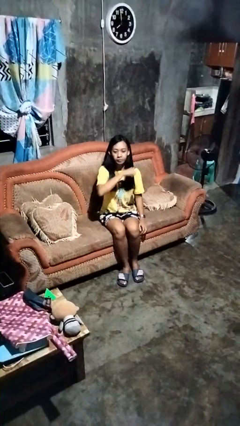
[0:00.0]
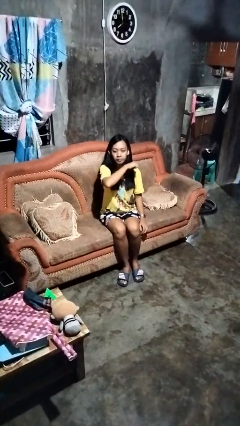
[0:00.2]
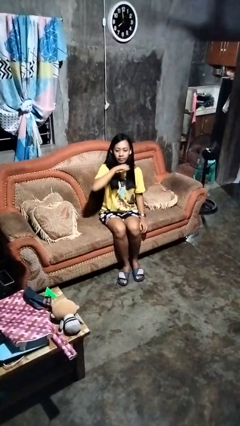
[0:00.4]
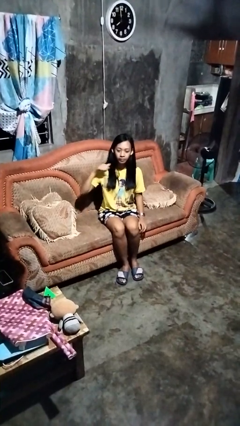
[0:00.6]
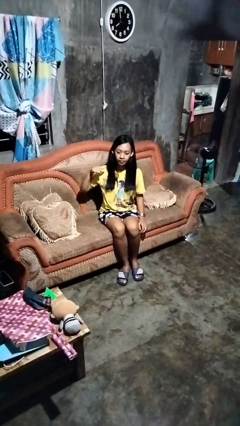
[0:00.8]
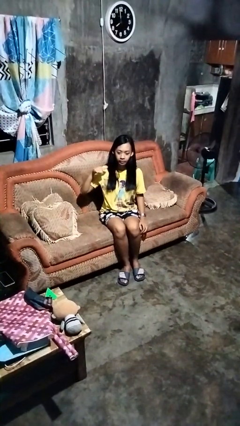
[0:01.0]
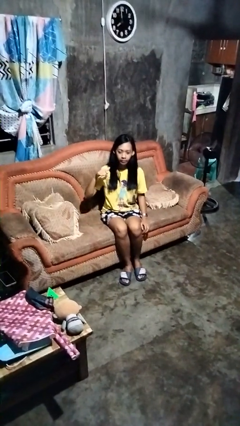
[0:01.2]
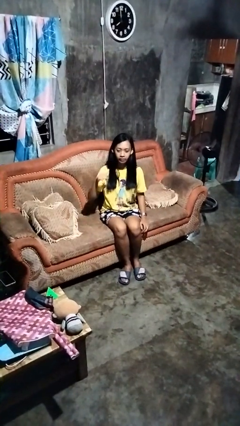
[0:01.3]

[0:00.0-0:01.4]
person gestures cut

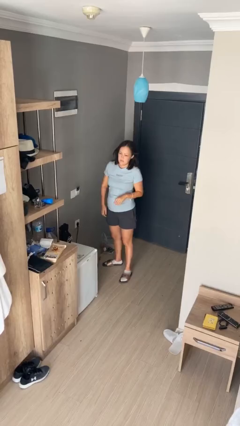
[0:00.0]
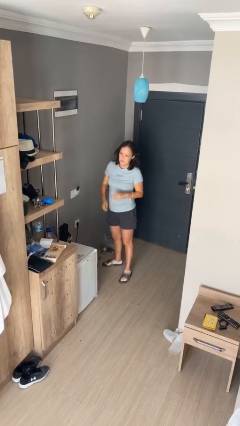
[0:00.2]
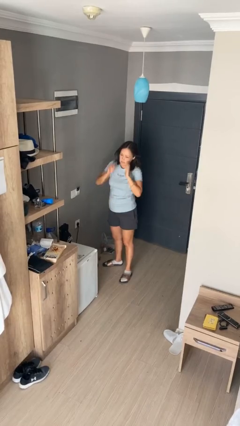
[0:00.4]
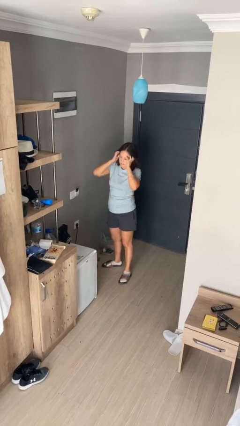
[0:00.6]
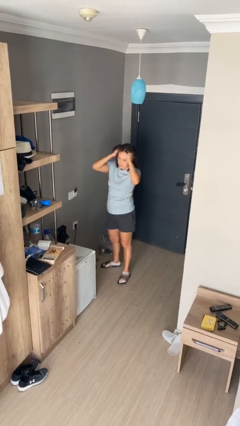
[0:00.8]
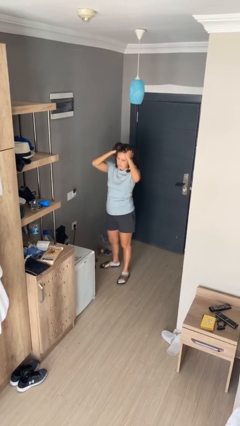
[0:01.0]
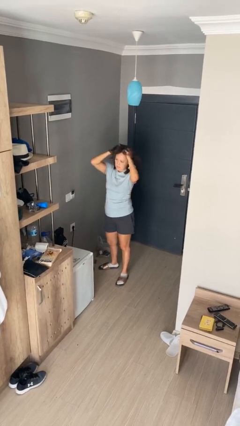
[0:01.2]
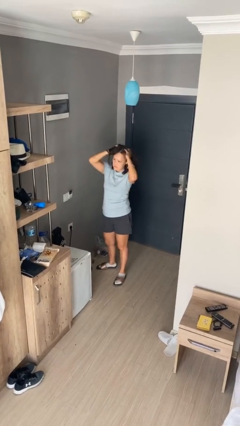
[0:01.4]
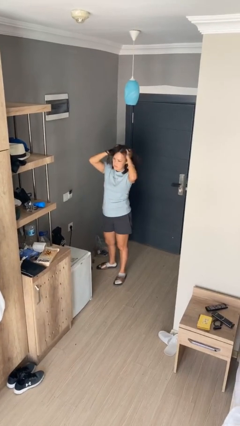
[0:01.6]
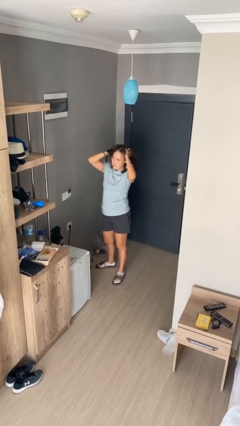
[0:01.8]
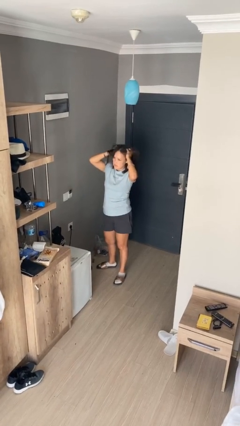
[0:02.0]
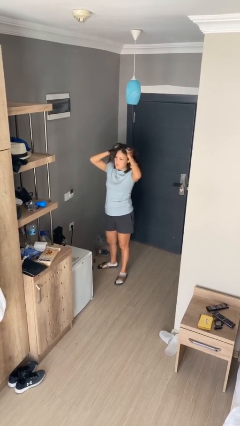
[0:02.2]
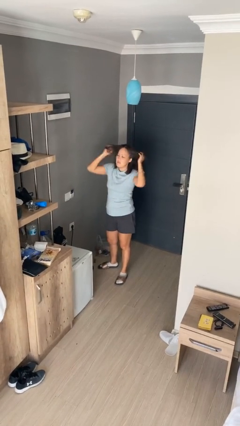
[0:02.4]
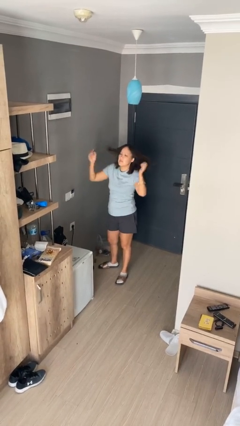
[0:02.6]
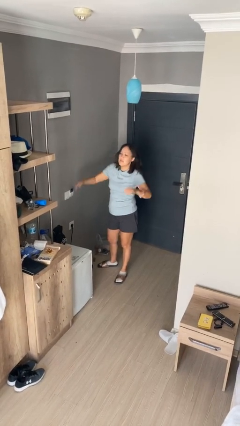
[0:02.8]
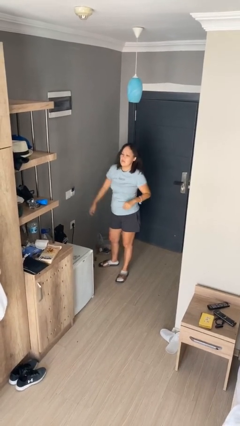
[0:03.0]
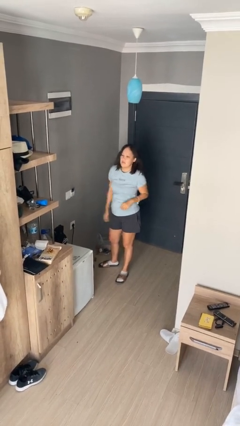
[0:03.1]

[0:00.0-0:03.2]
person scratches face

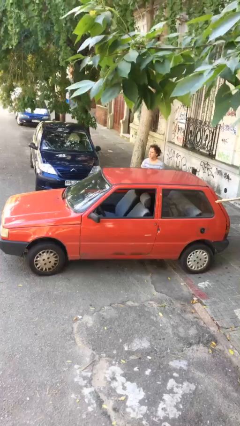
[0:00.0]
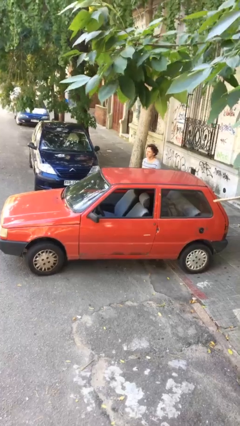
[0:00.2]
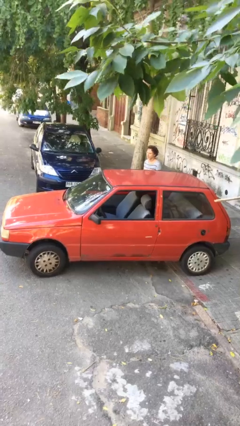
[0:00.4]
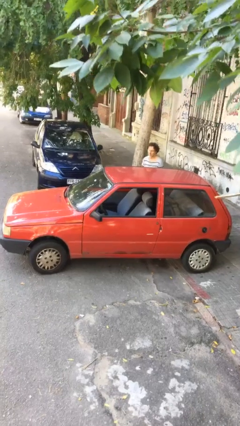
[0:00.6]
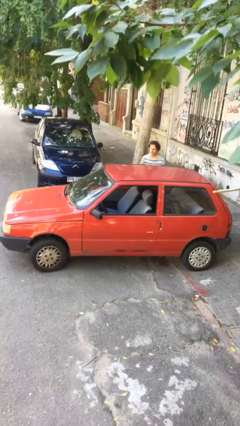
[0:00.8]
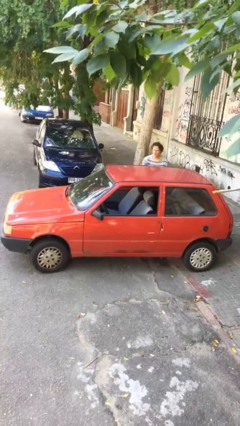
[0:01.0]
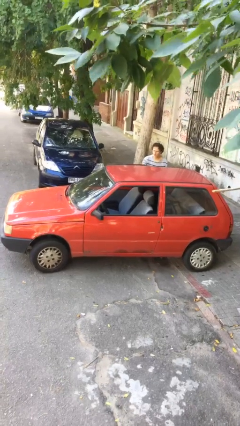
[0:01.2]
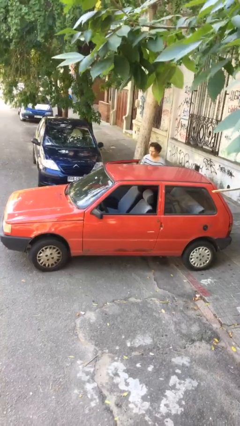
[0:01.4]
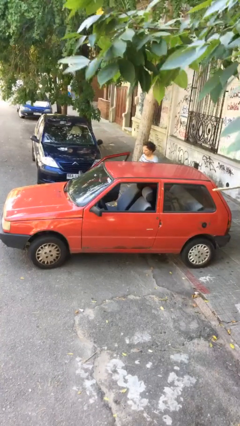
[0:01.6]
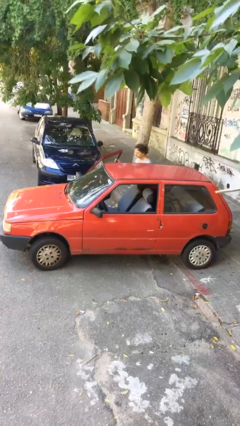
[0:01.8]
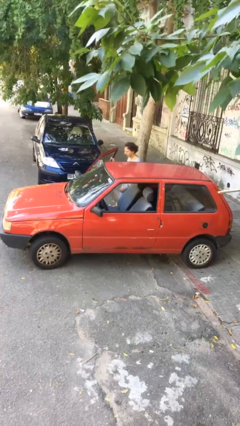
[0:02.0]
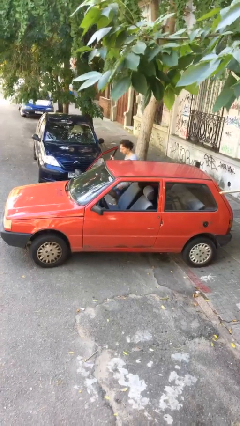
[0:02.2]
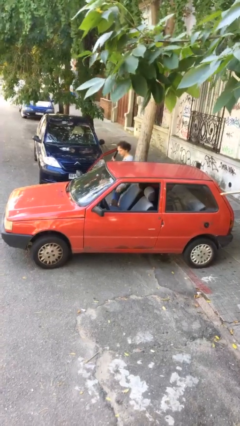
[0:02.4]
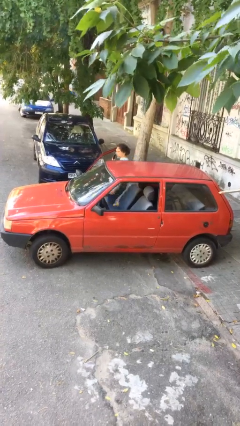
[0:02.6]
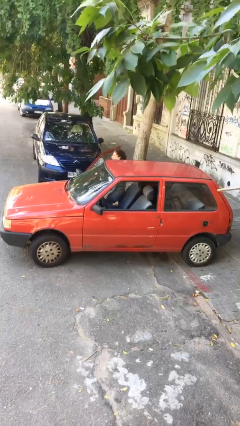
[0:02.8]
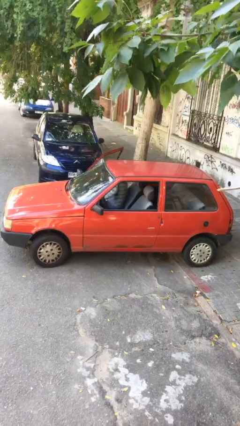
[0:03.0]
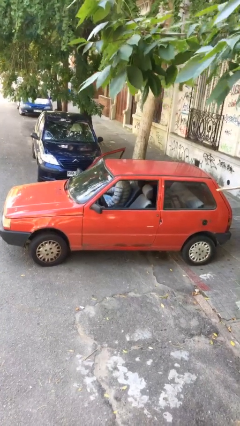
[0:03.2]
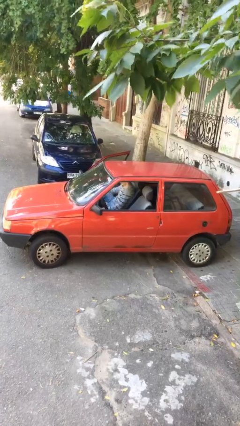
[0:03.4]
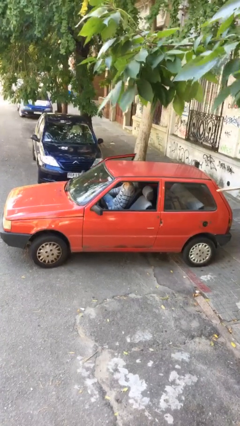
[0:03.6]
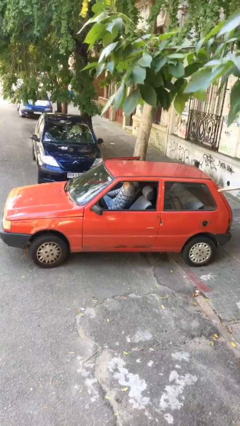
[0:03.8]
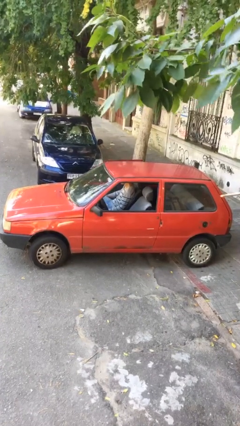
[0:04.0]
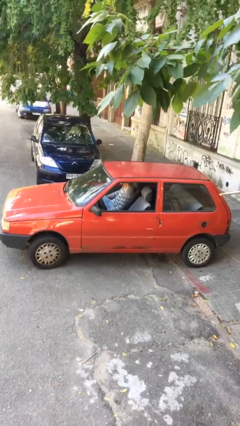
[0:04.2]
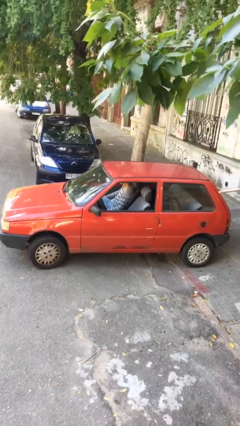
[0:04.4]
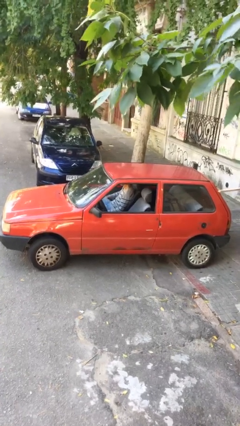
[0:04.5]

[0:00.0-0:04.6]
car picks up person

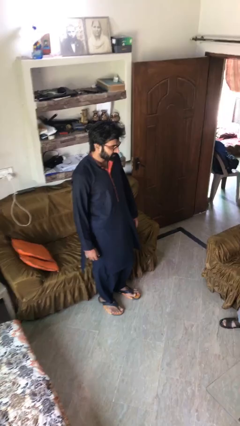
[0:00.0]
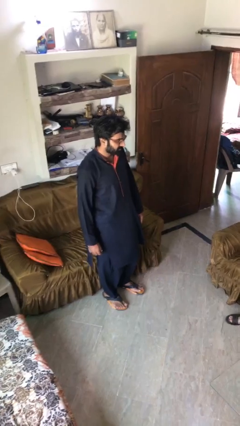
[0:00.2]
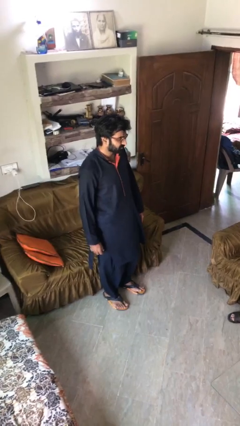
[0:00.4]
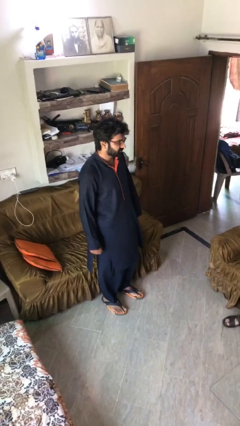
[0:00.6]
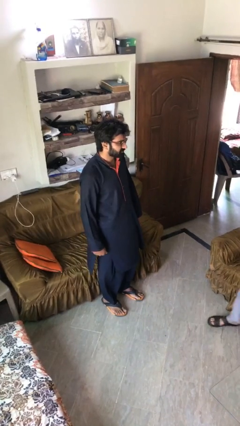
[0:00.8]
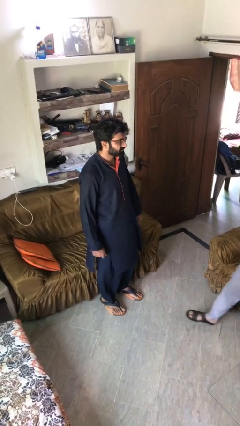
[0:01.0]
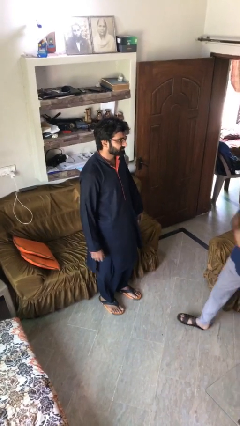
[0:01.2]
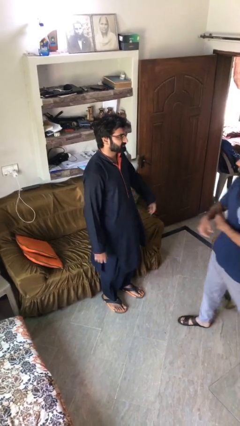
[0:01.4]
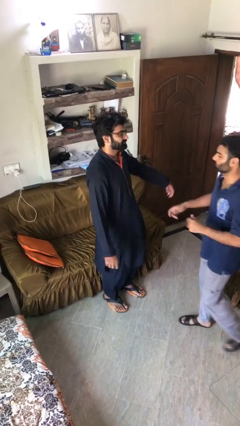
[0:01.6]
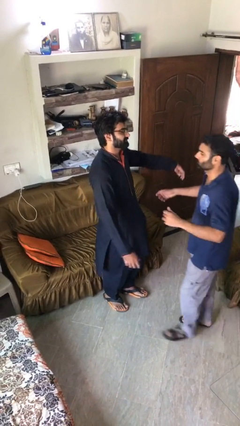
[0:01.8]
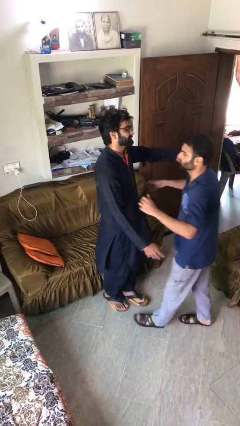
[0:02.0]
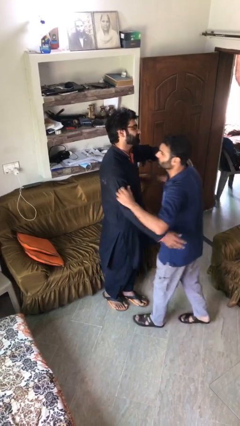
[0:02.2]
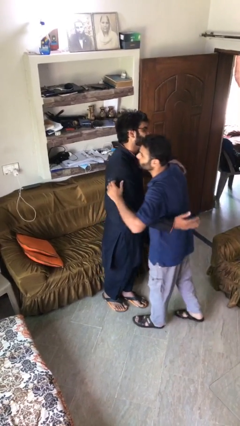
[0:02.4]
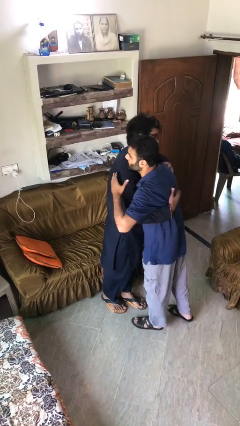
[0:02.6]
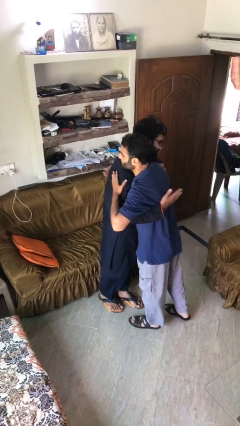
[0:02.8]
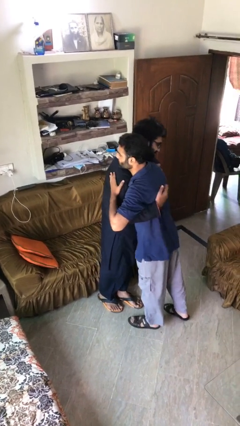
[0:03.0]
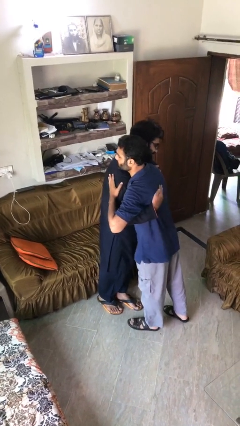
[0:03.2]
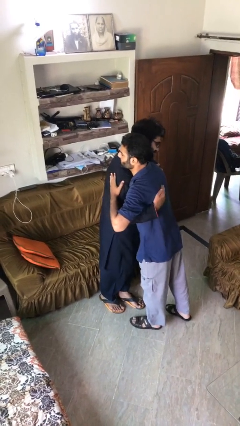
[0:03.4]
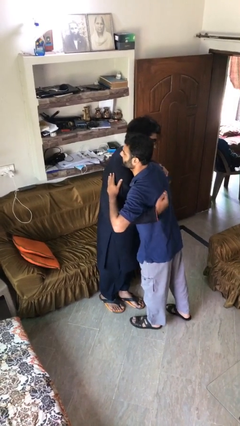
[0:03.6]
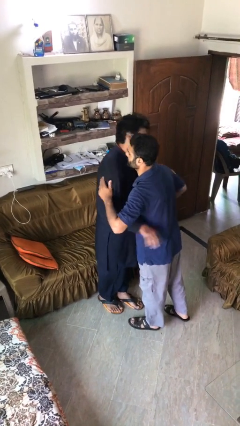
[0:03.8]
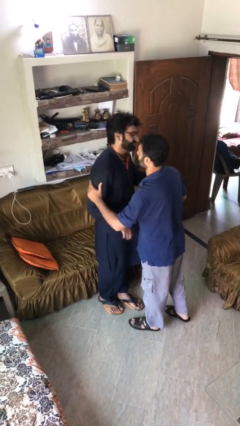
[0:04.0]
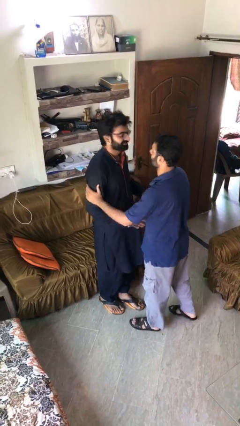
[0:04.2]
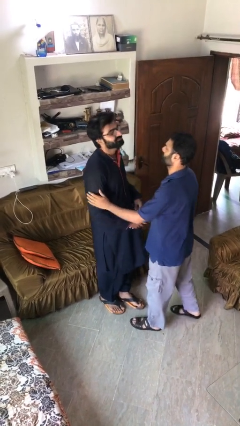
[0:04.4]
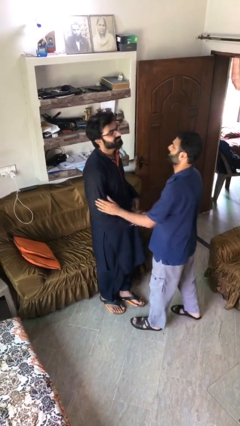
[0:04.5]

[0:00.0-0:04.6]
person embraces person

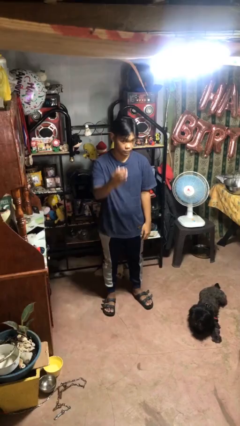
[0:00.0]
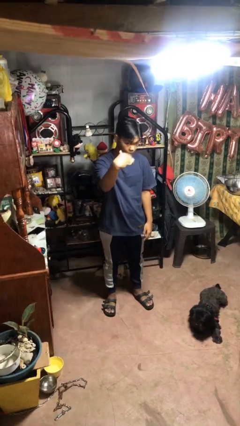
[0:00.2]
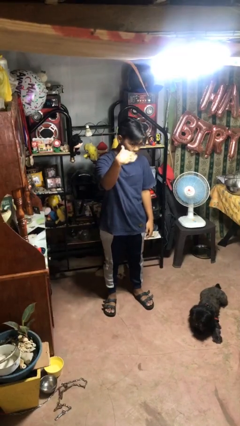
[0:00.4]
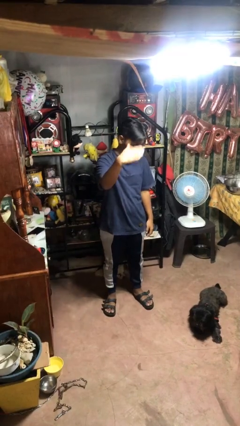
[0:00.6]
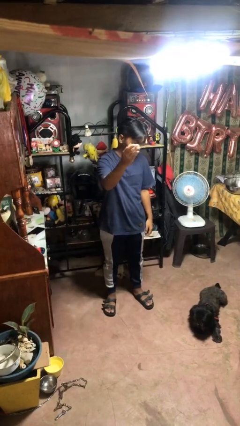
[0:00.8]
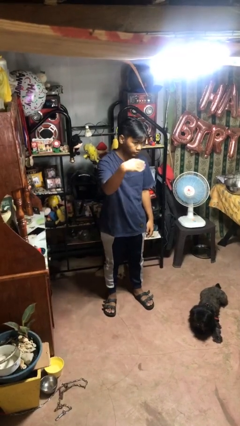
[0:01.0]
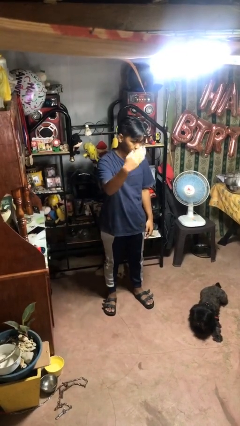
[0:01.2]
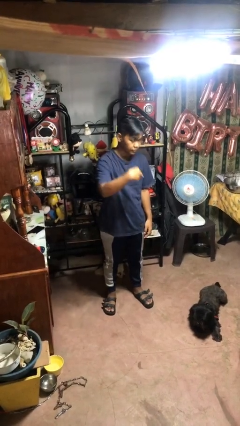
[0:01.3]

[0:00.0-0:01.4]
person gestures come here

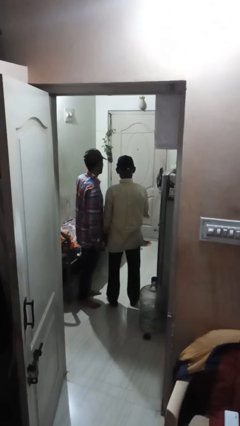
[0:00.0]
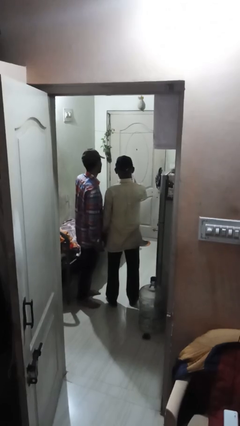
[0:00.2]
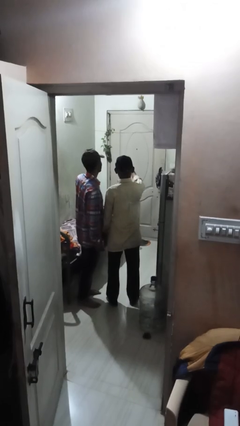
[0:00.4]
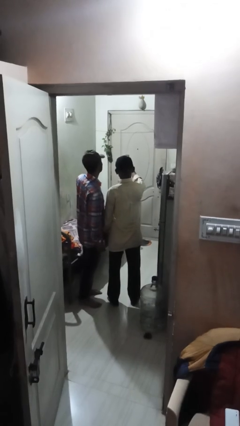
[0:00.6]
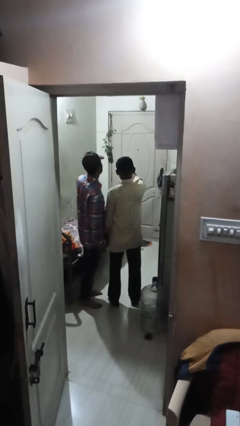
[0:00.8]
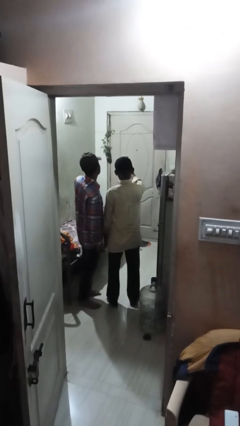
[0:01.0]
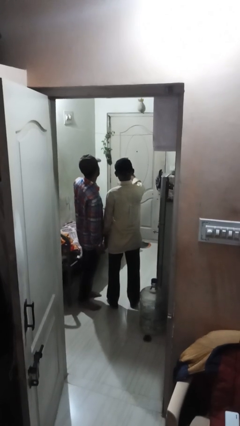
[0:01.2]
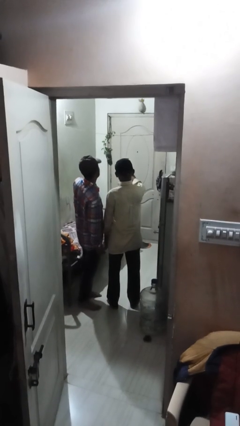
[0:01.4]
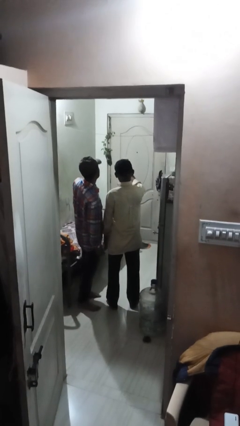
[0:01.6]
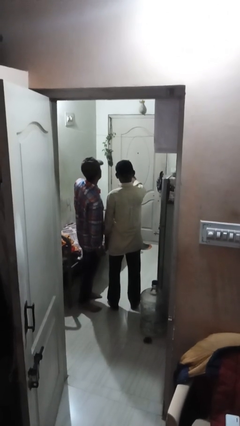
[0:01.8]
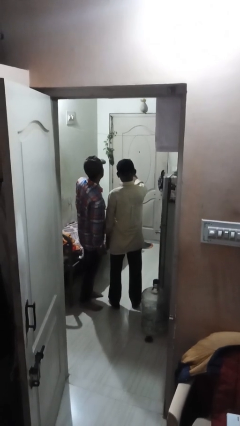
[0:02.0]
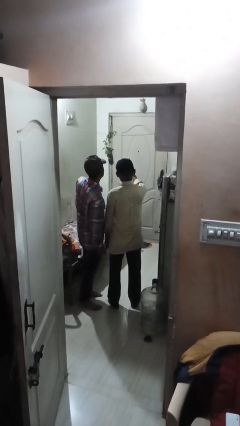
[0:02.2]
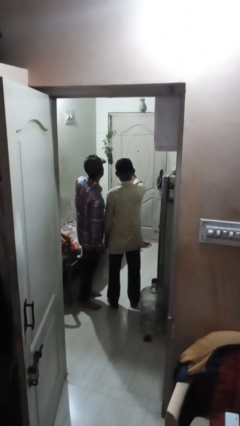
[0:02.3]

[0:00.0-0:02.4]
person takes selfie with person
